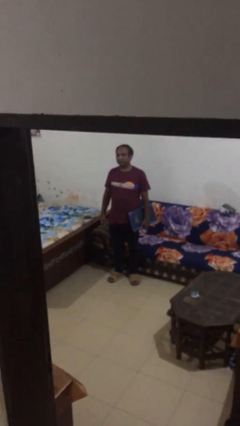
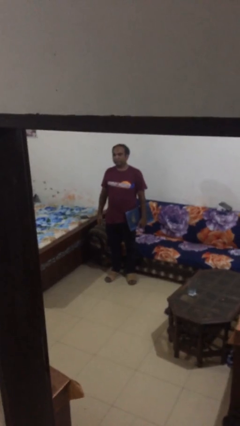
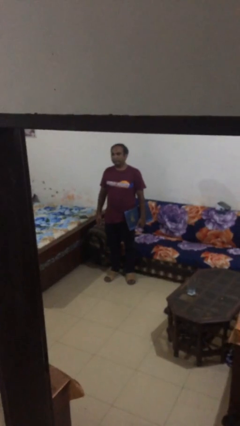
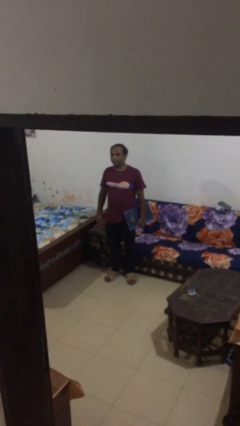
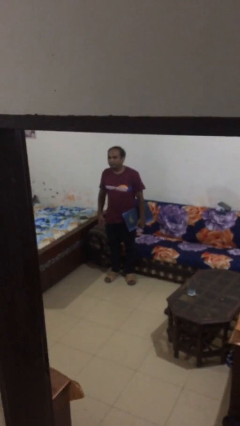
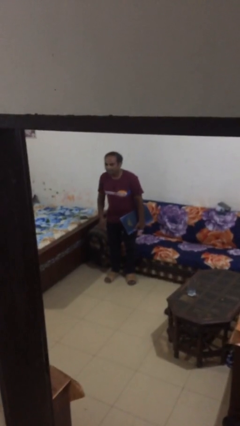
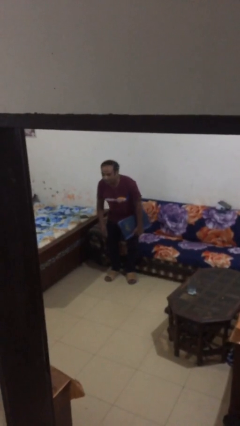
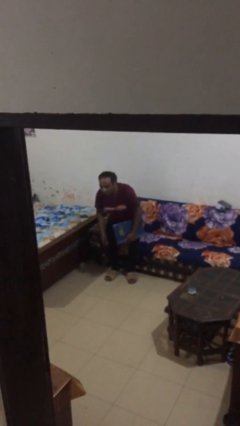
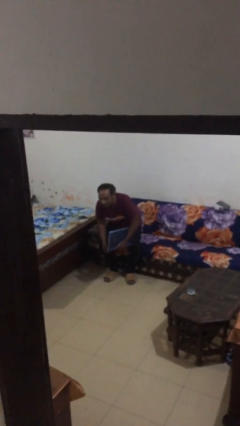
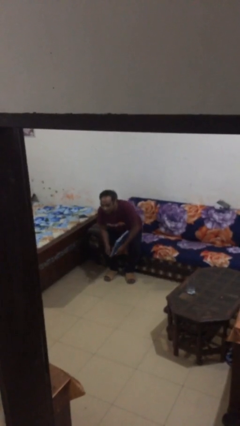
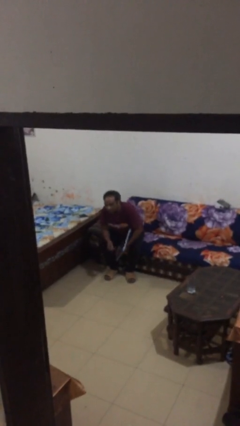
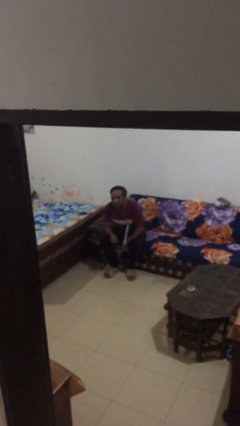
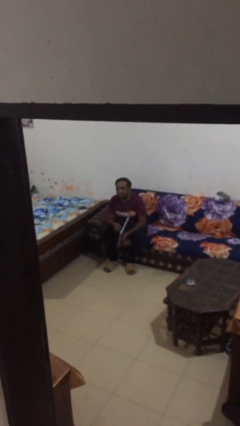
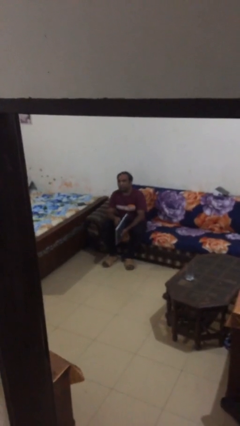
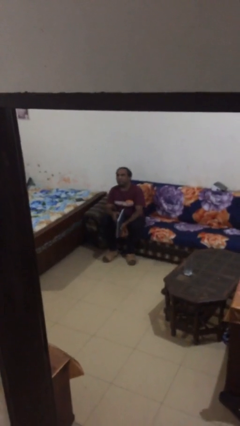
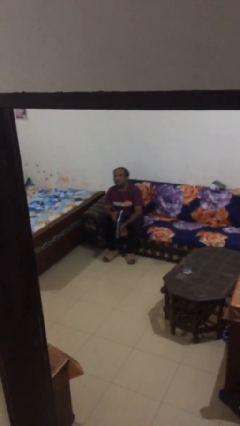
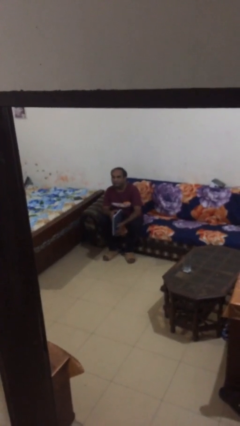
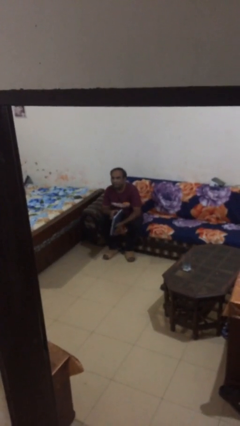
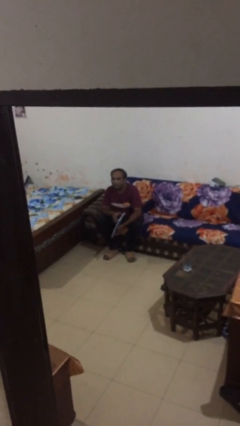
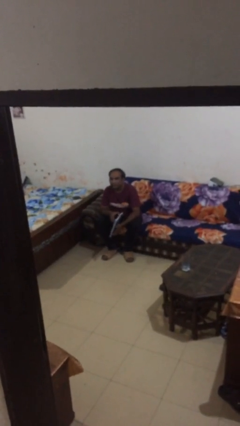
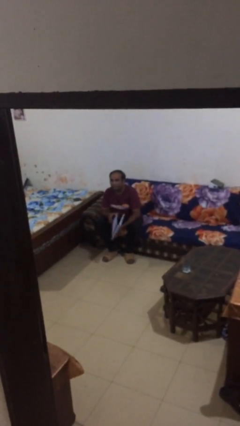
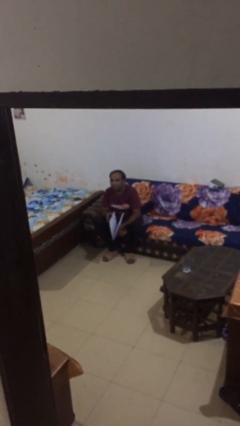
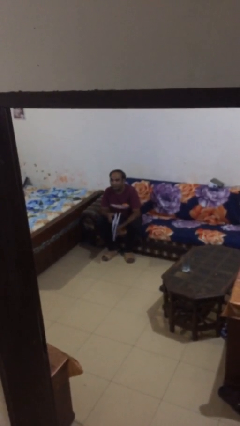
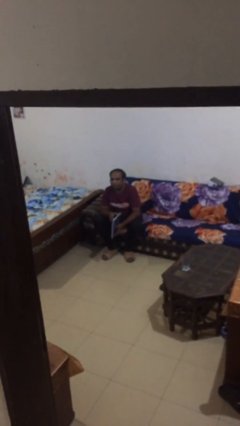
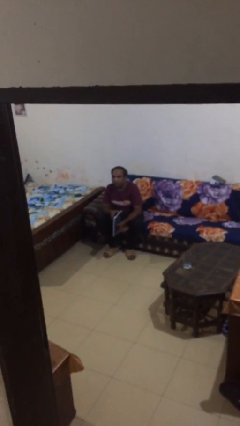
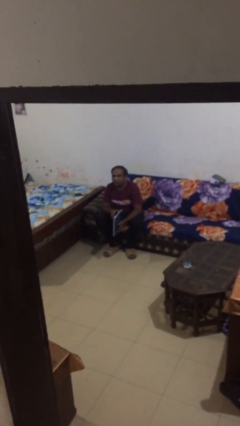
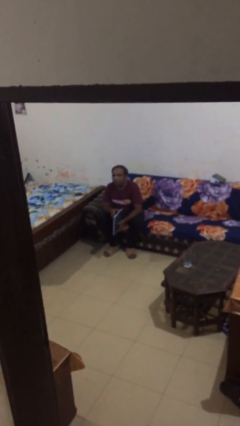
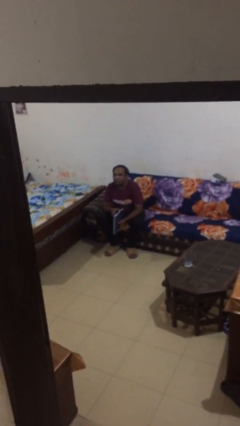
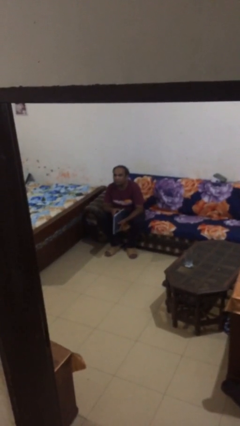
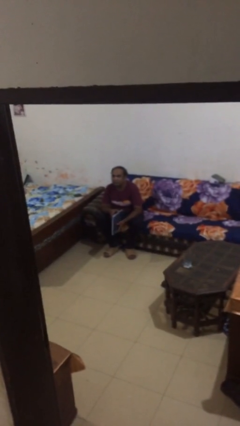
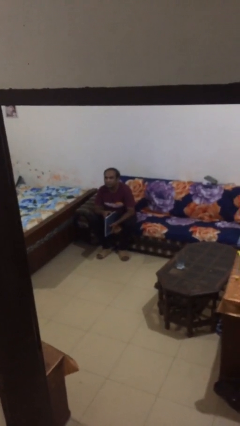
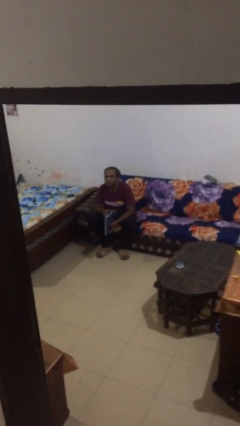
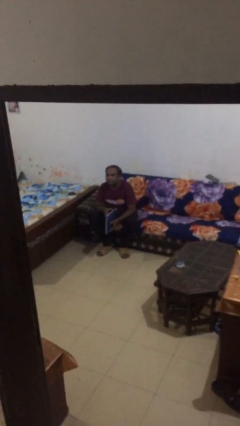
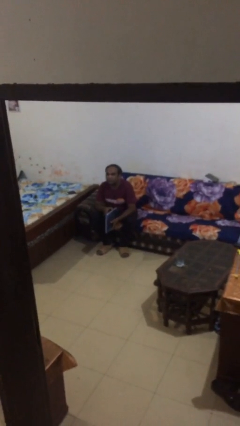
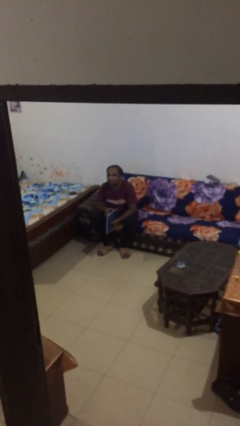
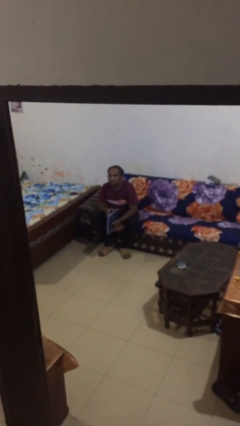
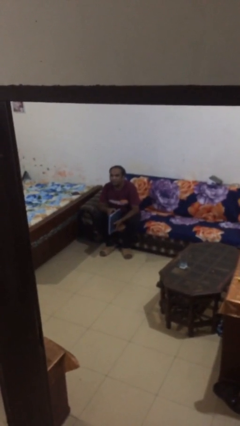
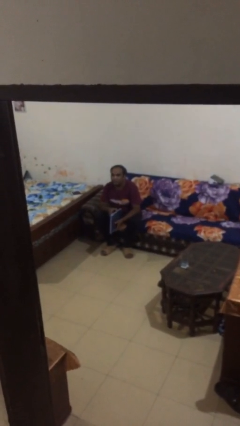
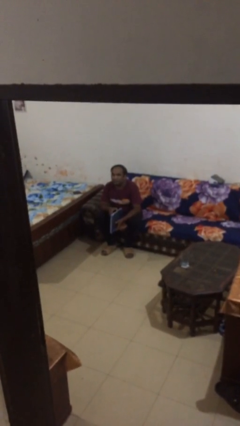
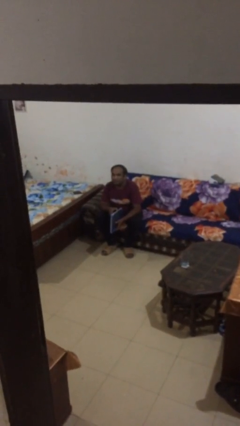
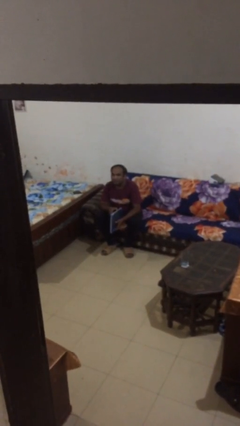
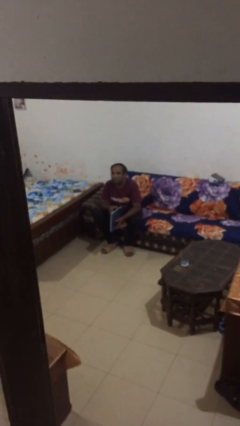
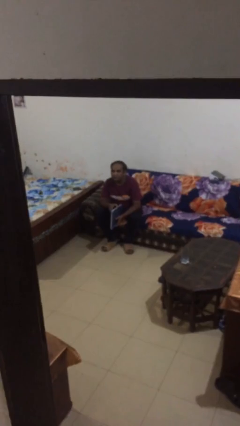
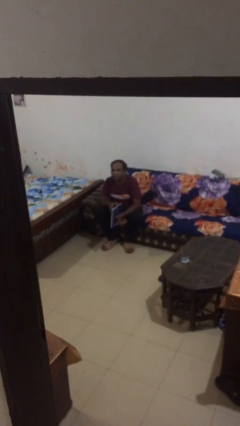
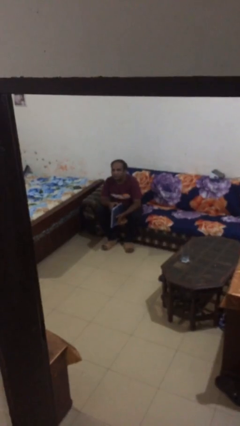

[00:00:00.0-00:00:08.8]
person sits down

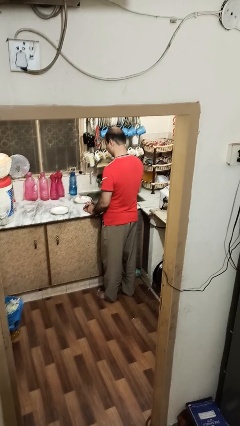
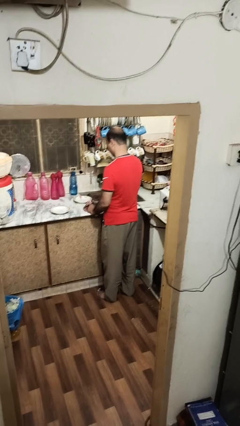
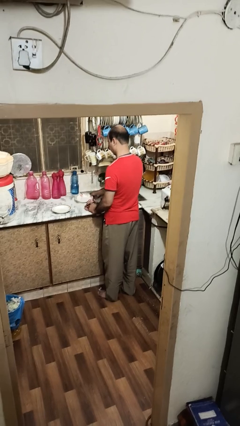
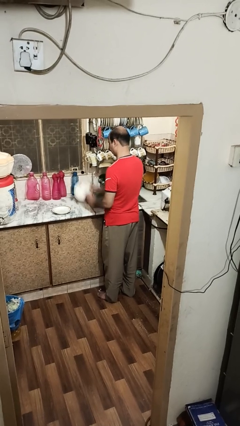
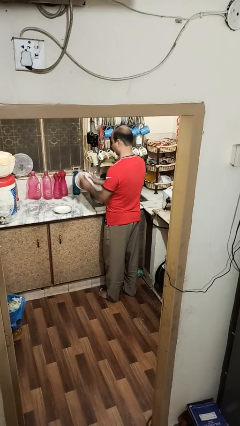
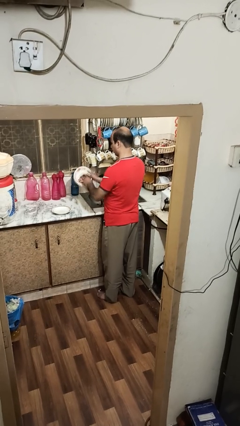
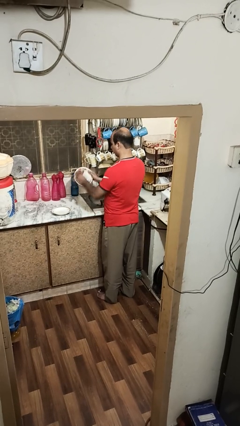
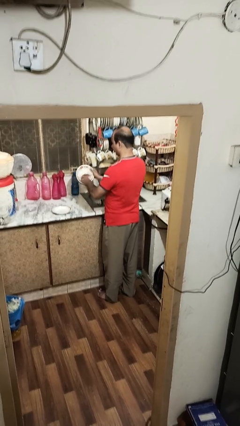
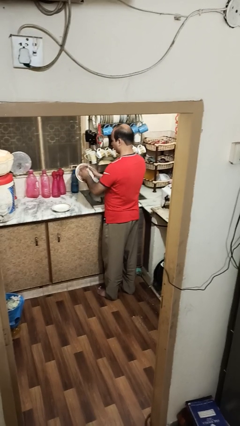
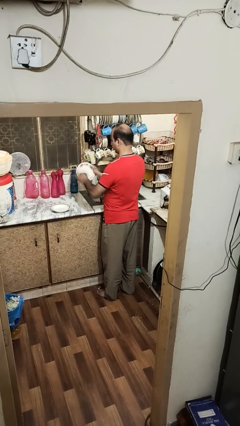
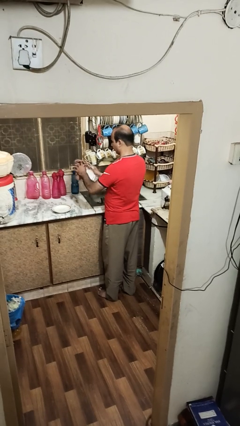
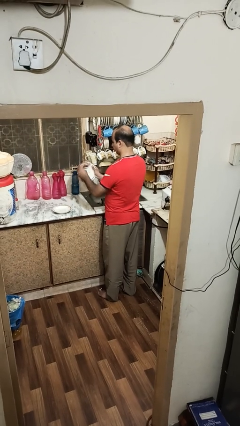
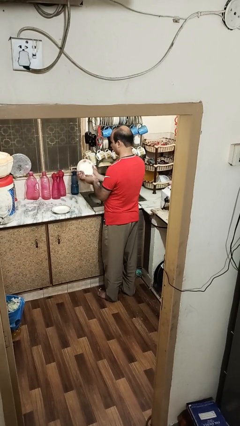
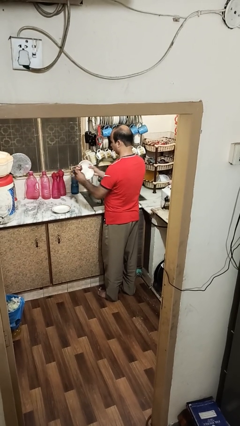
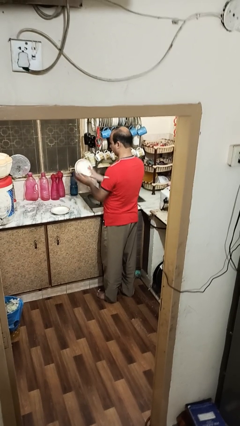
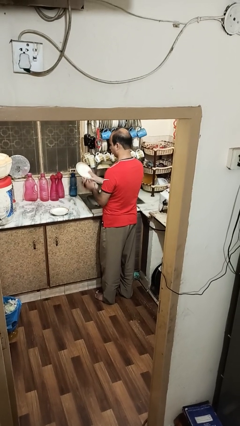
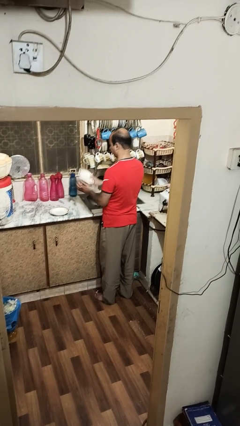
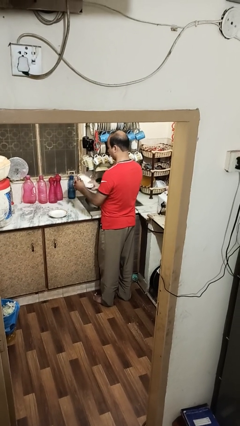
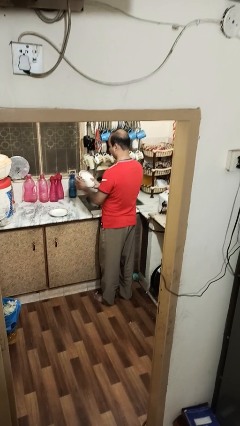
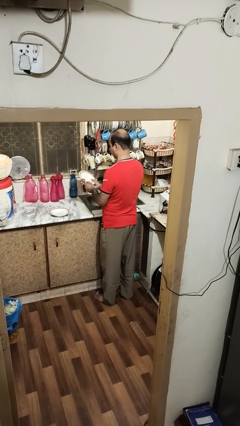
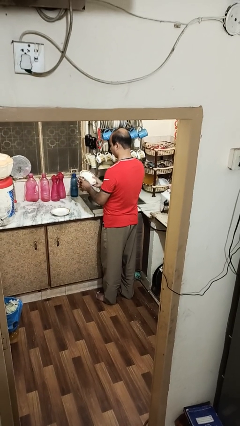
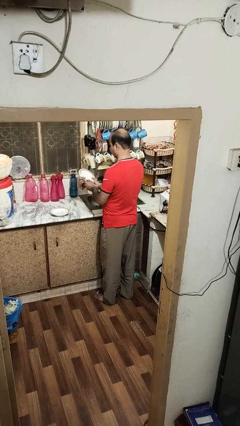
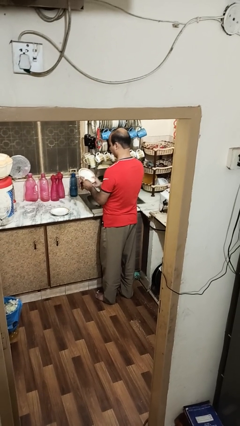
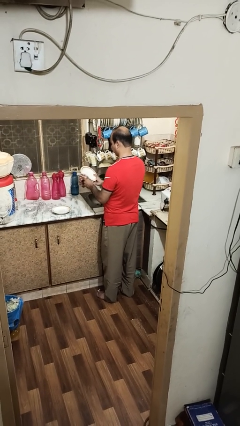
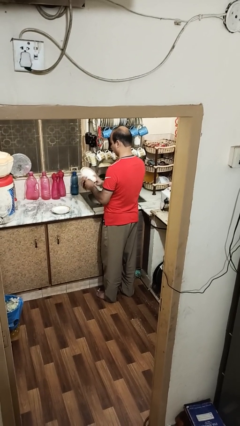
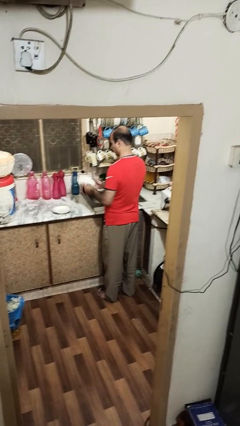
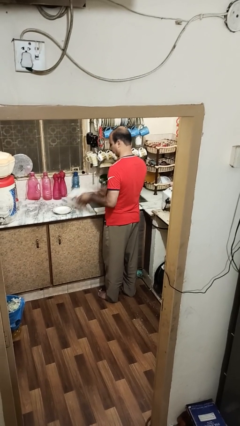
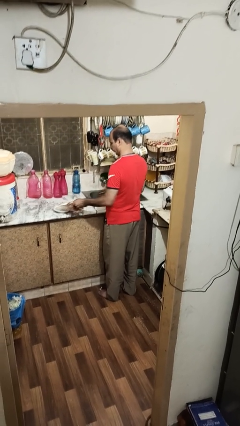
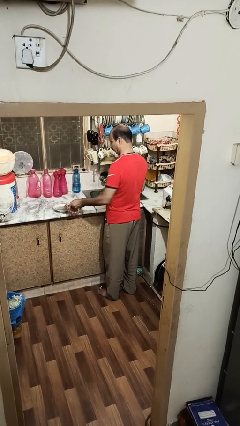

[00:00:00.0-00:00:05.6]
person dries dish

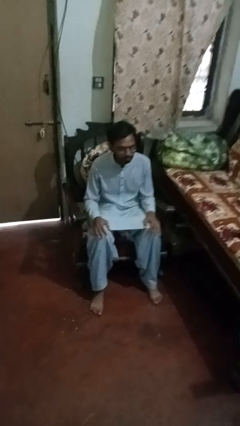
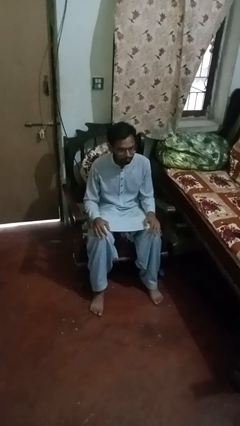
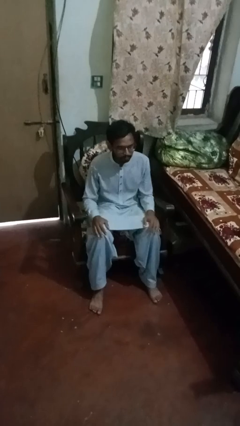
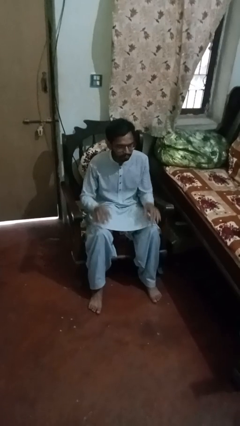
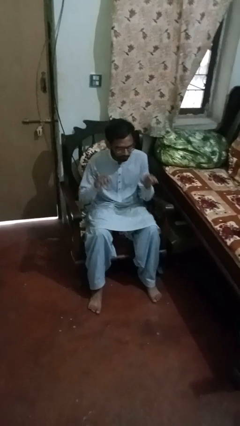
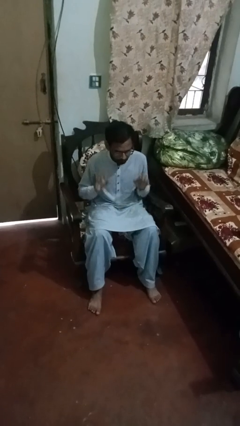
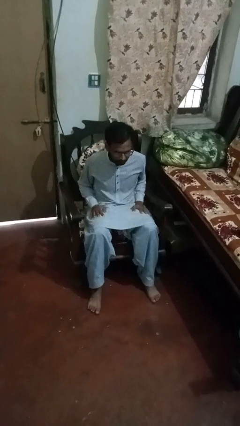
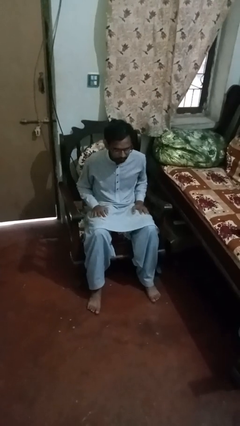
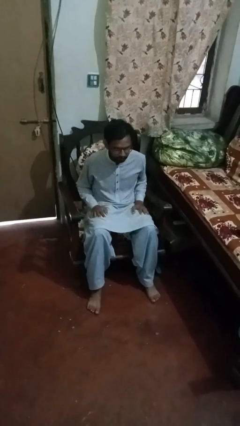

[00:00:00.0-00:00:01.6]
person slaps hands on thighs

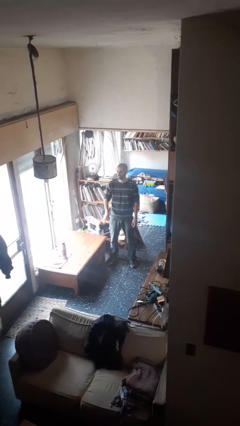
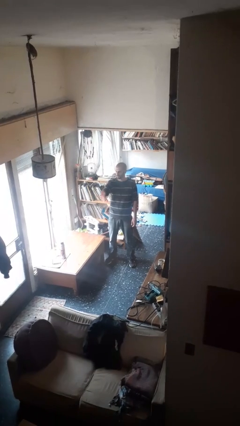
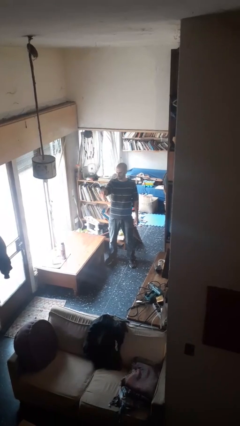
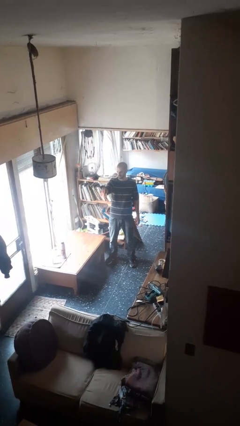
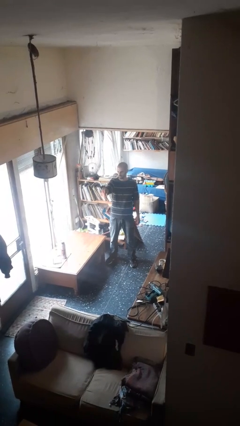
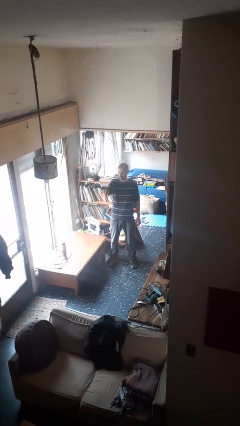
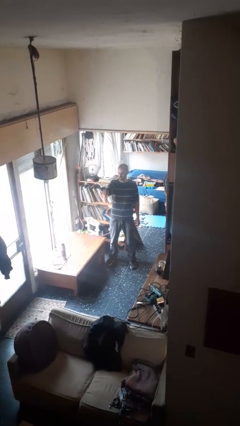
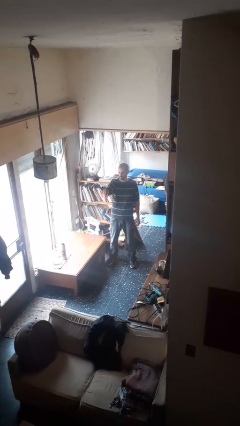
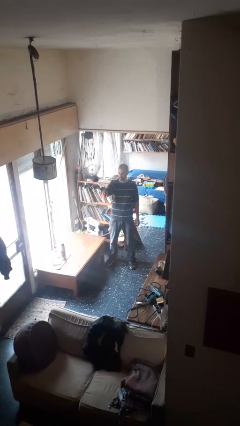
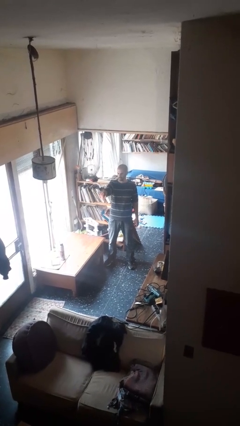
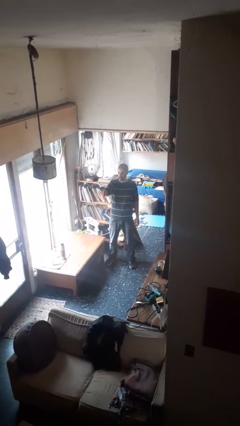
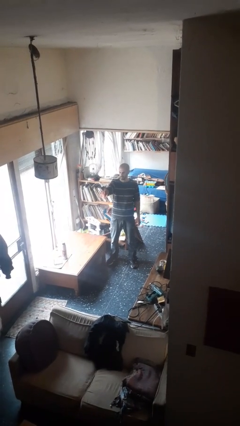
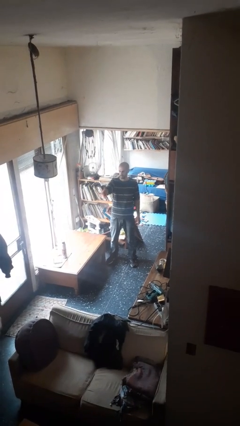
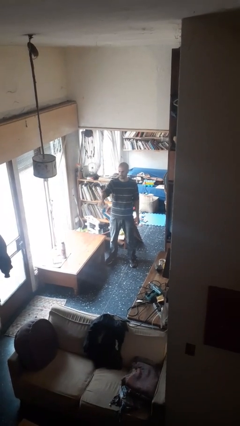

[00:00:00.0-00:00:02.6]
person gestures stop
